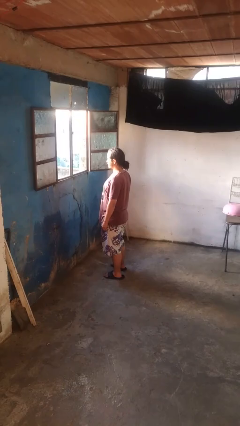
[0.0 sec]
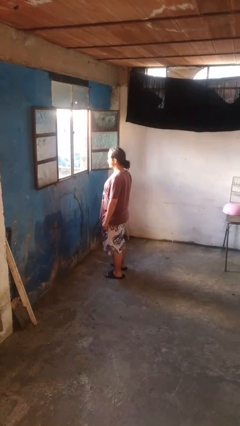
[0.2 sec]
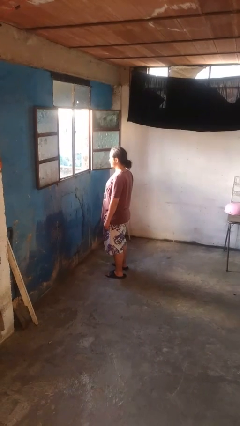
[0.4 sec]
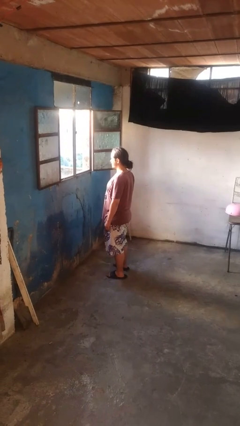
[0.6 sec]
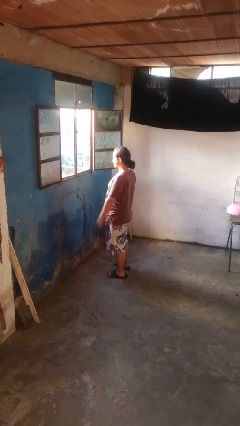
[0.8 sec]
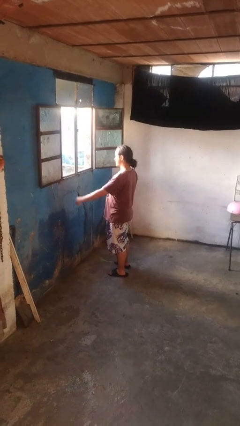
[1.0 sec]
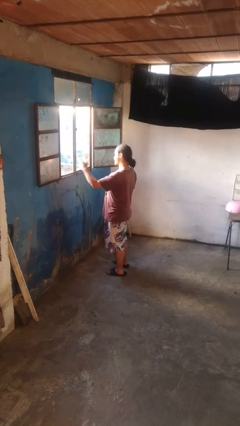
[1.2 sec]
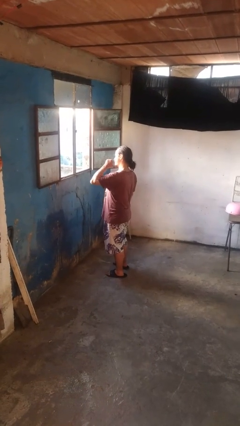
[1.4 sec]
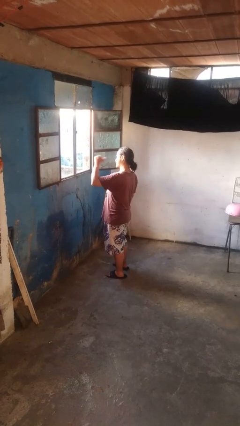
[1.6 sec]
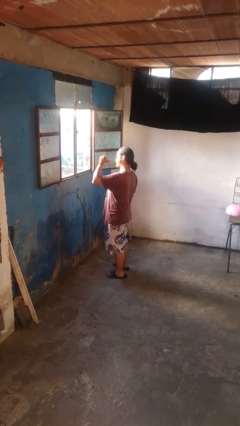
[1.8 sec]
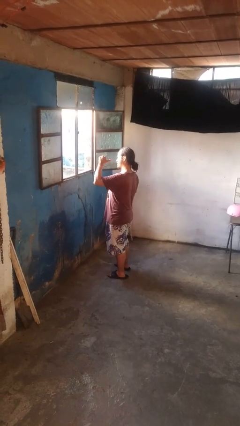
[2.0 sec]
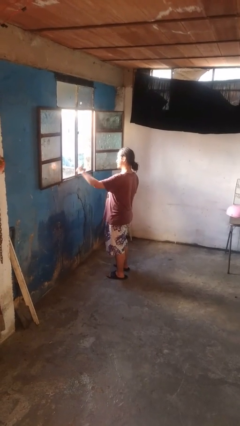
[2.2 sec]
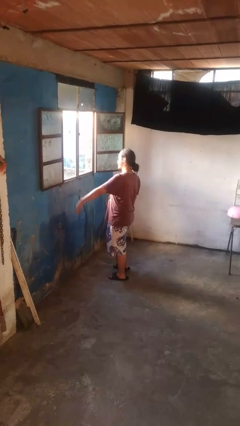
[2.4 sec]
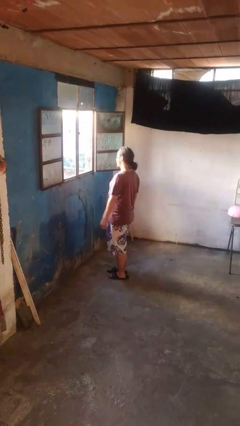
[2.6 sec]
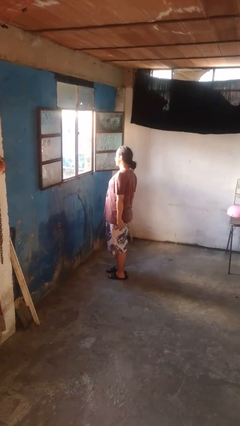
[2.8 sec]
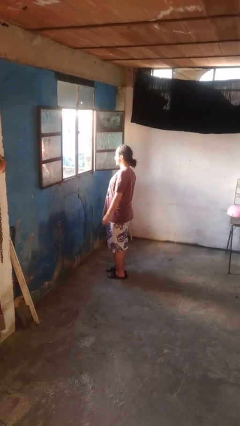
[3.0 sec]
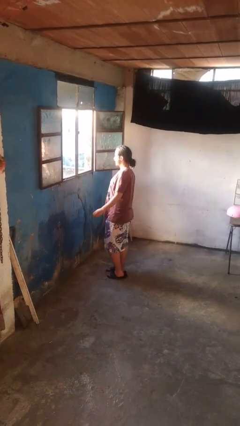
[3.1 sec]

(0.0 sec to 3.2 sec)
person gestures behind me

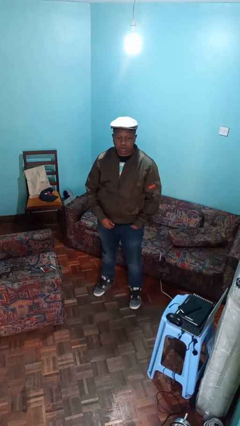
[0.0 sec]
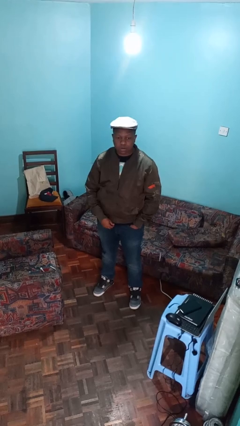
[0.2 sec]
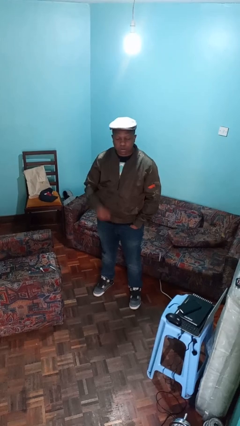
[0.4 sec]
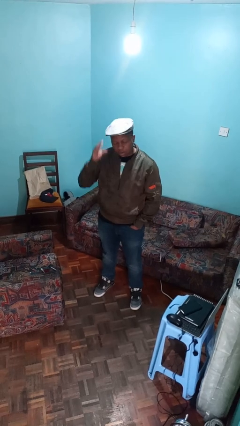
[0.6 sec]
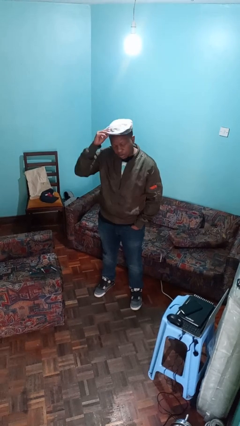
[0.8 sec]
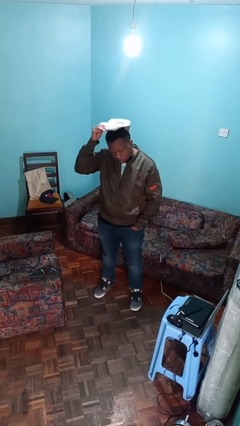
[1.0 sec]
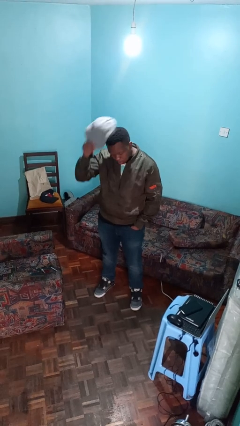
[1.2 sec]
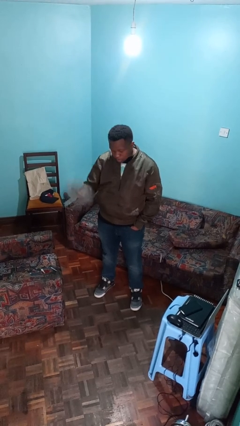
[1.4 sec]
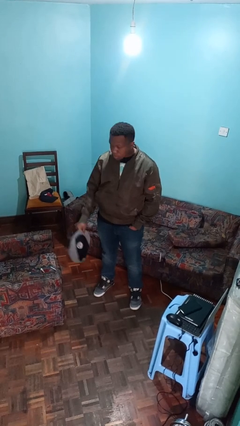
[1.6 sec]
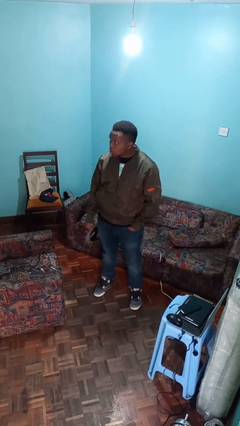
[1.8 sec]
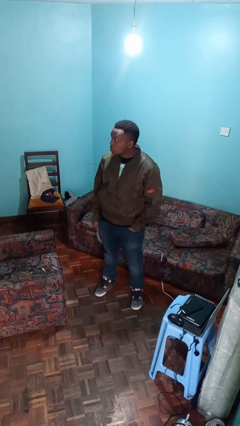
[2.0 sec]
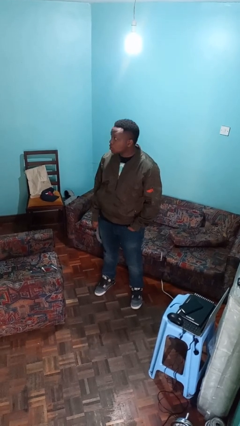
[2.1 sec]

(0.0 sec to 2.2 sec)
person takes off hat

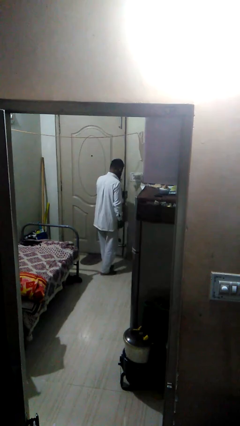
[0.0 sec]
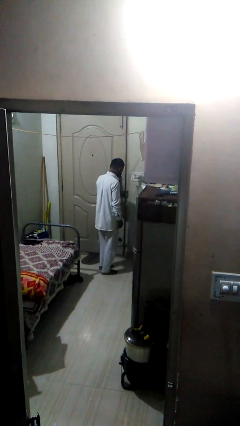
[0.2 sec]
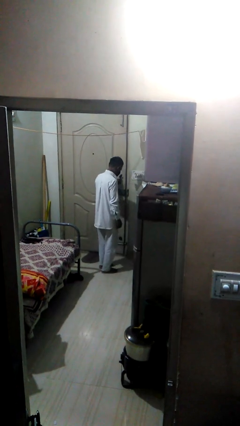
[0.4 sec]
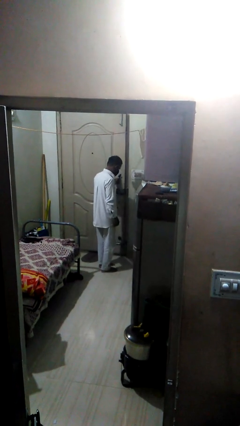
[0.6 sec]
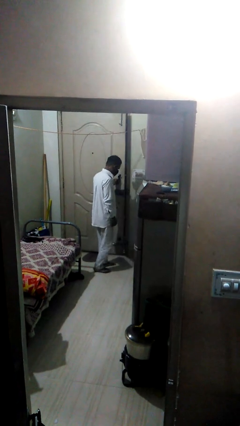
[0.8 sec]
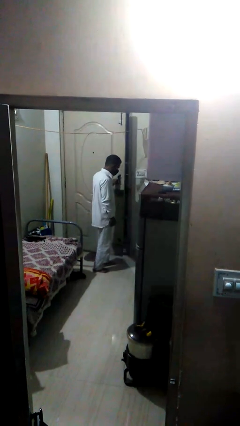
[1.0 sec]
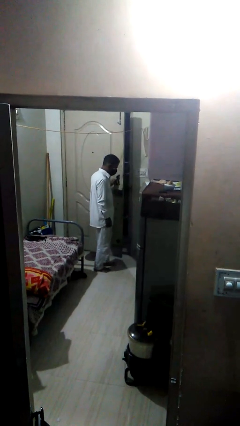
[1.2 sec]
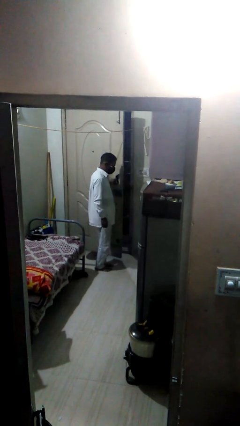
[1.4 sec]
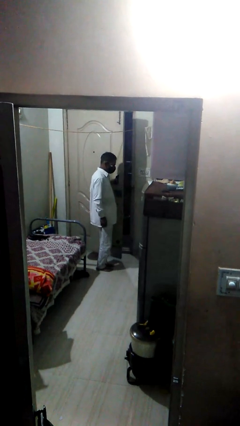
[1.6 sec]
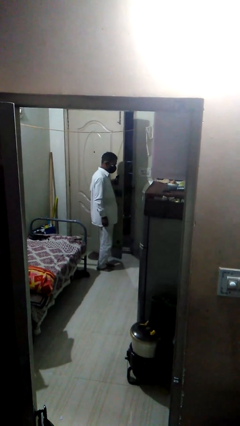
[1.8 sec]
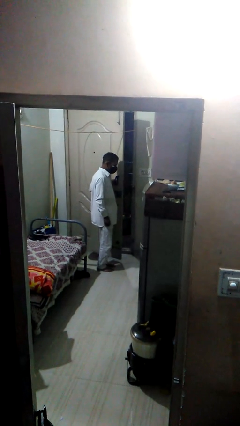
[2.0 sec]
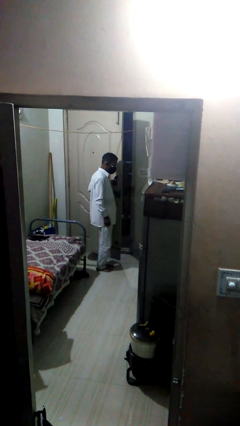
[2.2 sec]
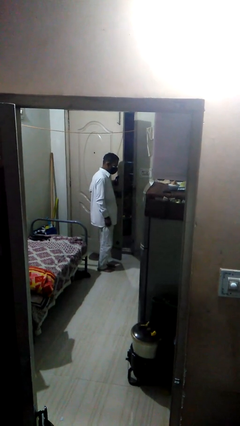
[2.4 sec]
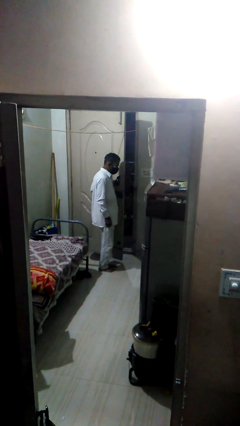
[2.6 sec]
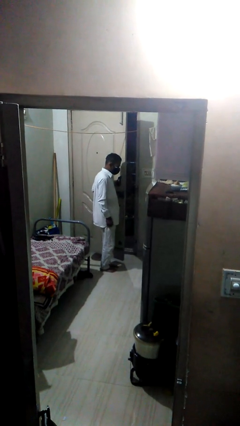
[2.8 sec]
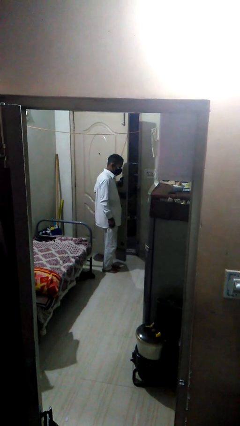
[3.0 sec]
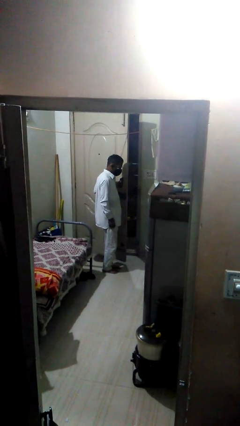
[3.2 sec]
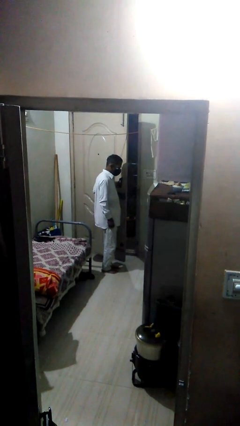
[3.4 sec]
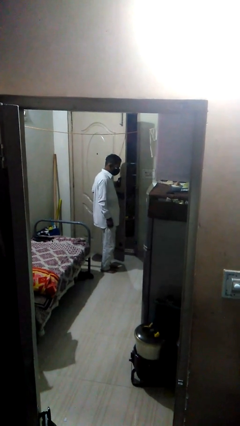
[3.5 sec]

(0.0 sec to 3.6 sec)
person opens facility door

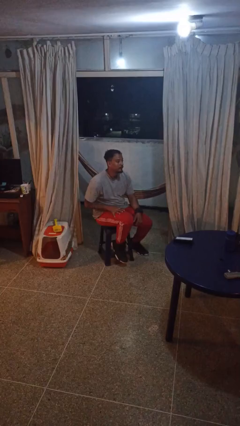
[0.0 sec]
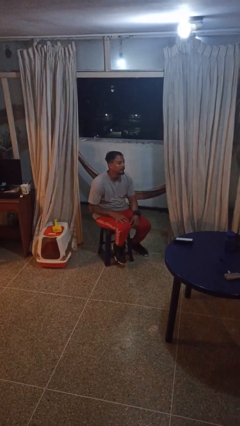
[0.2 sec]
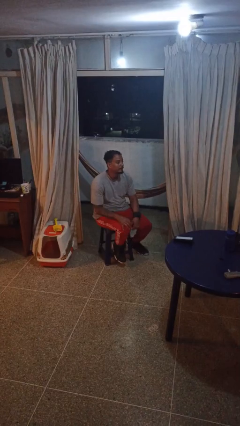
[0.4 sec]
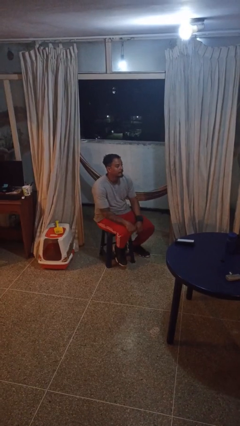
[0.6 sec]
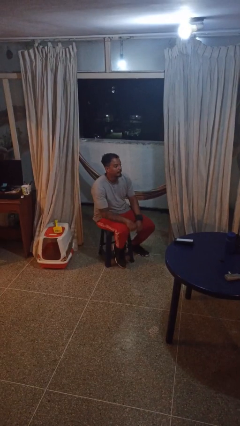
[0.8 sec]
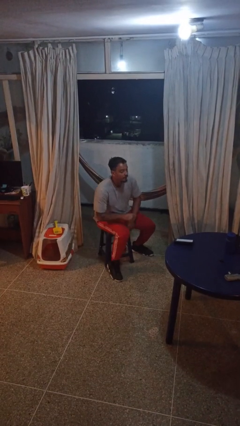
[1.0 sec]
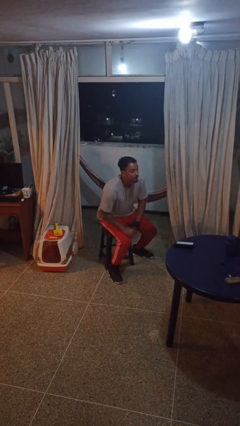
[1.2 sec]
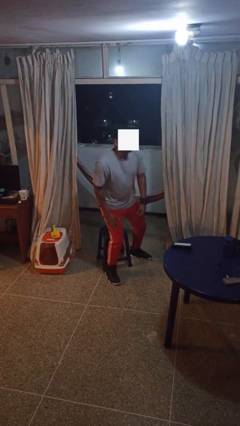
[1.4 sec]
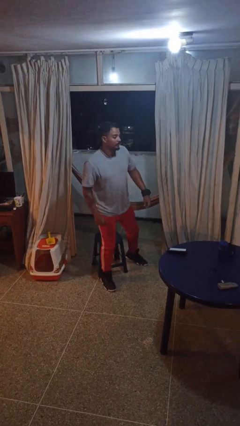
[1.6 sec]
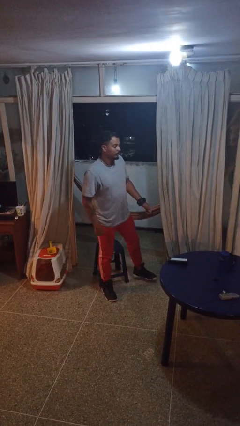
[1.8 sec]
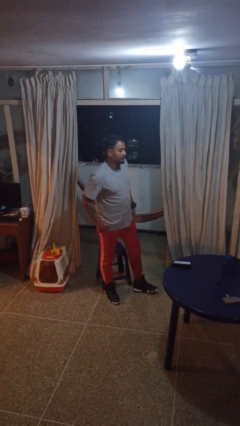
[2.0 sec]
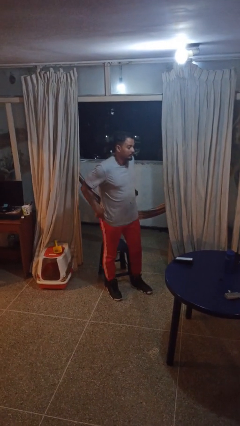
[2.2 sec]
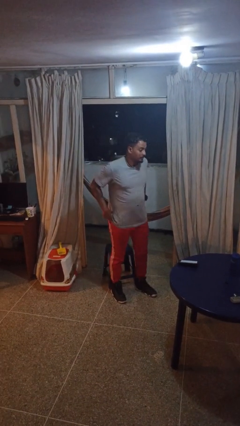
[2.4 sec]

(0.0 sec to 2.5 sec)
person stands up

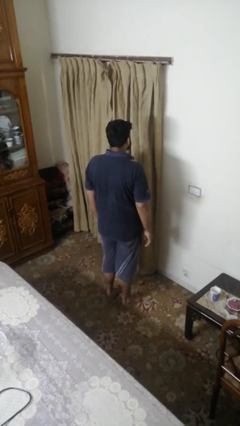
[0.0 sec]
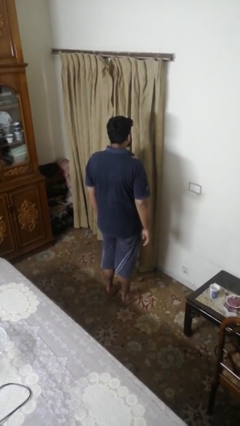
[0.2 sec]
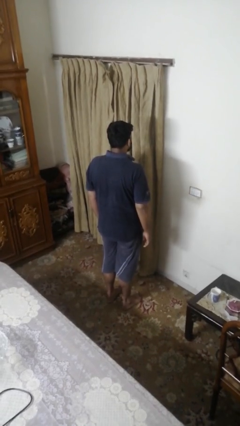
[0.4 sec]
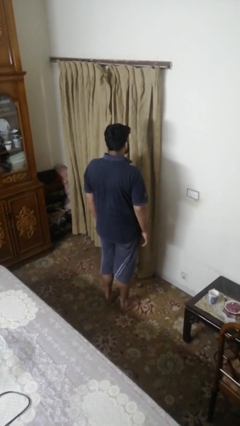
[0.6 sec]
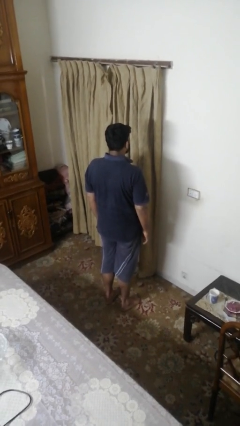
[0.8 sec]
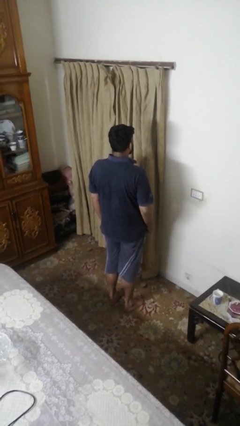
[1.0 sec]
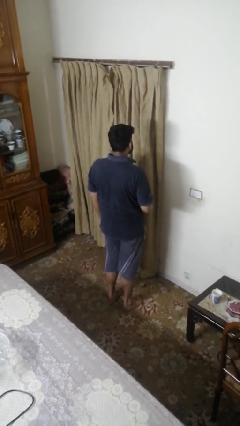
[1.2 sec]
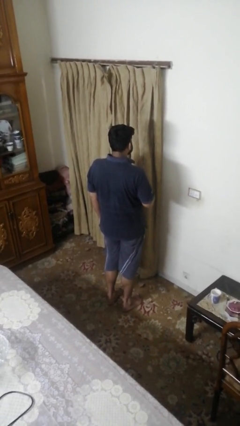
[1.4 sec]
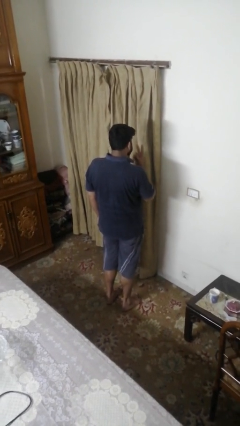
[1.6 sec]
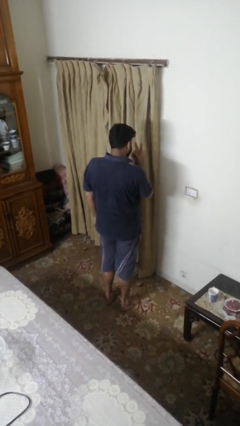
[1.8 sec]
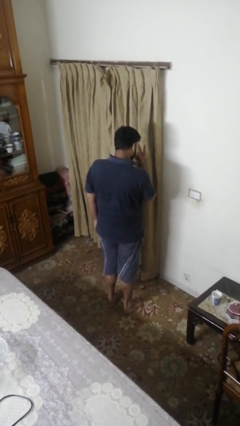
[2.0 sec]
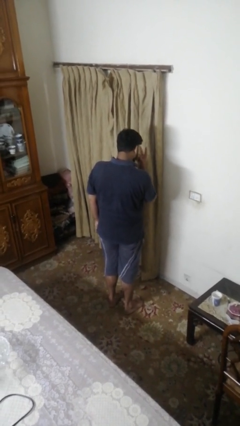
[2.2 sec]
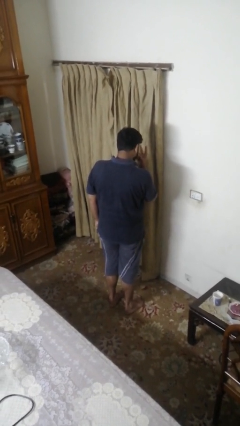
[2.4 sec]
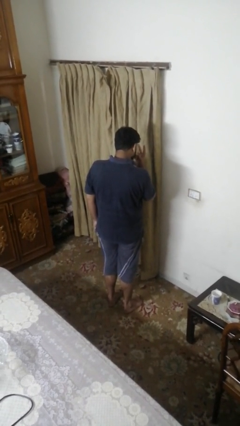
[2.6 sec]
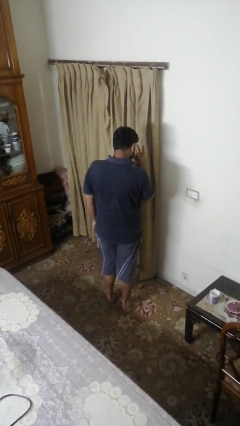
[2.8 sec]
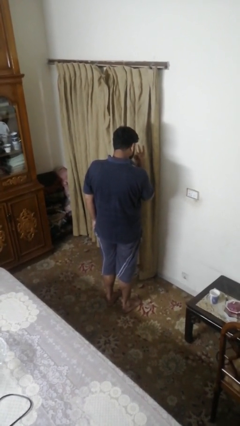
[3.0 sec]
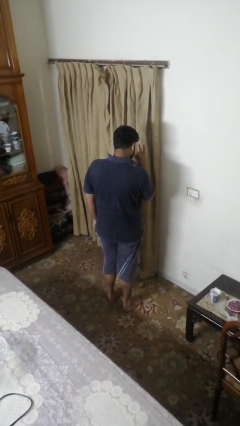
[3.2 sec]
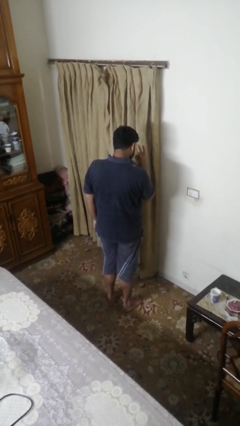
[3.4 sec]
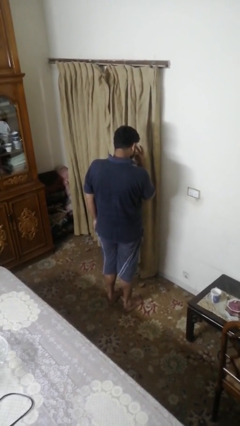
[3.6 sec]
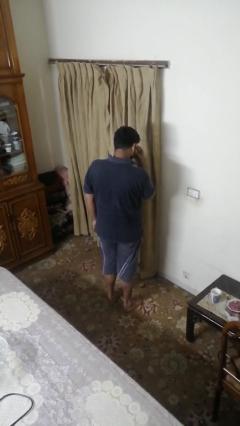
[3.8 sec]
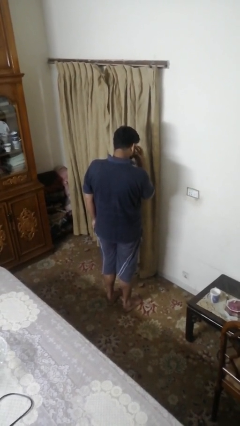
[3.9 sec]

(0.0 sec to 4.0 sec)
person gestures watch closely

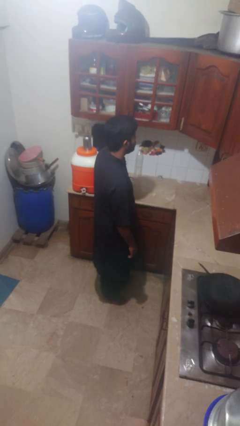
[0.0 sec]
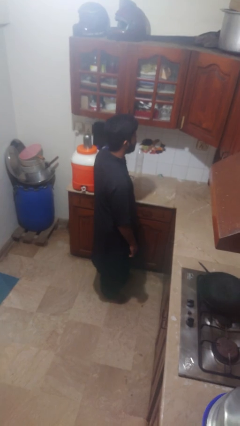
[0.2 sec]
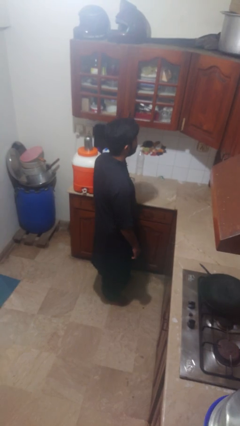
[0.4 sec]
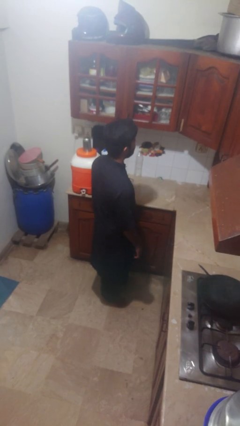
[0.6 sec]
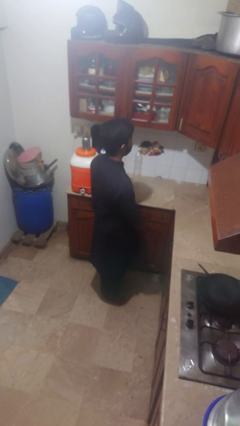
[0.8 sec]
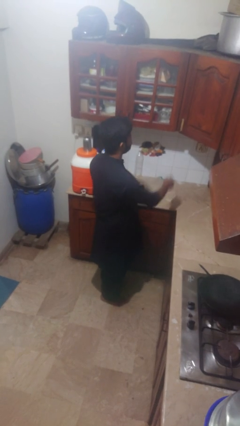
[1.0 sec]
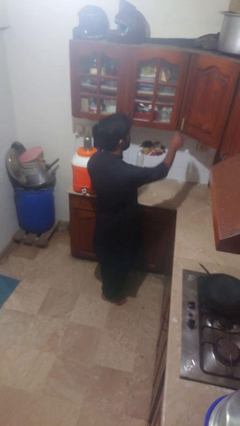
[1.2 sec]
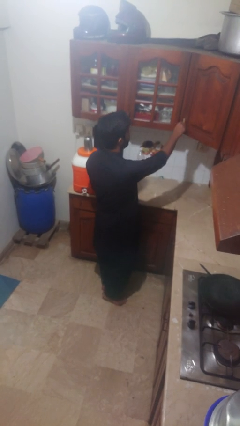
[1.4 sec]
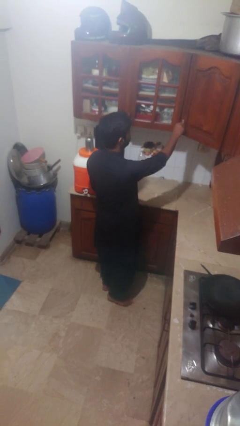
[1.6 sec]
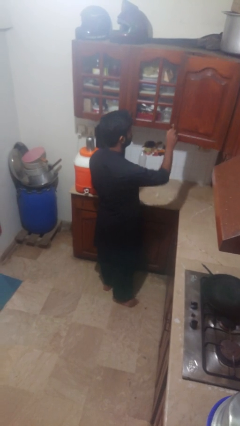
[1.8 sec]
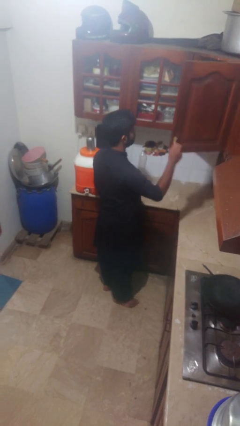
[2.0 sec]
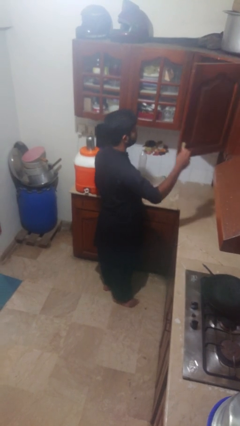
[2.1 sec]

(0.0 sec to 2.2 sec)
person opens cabinet
